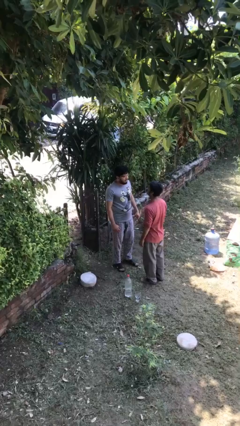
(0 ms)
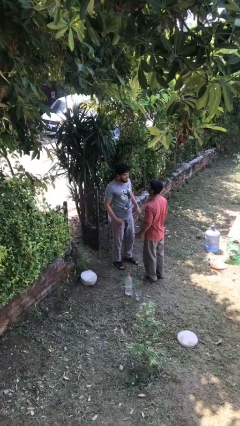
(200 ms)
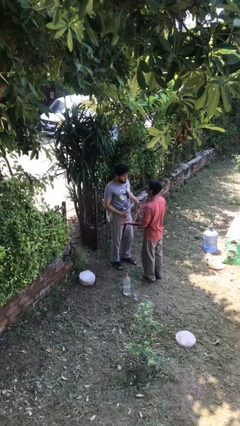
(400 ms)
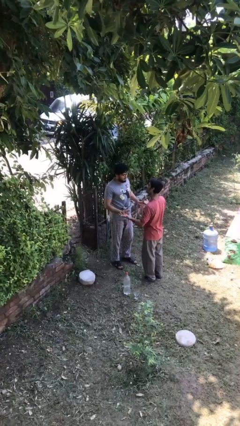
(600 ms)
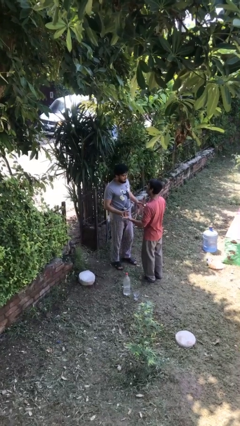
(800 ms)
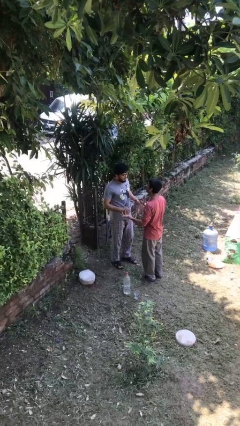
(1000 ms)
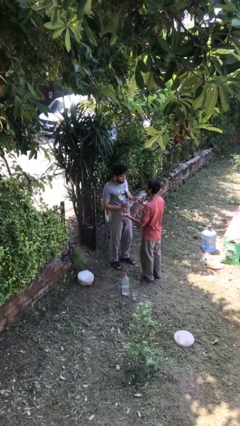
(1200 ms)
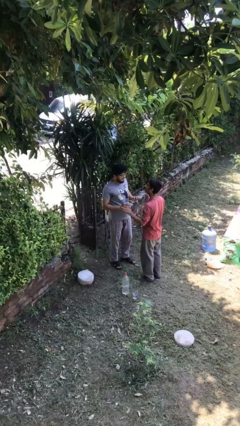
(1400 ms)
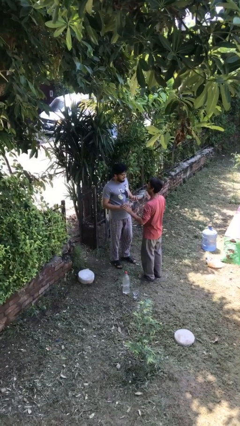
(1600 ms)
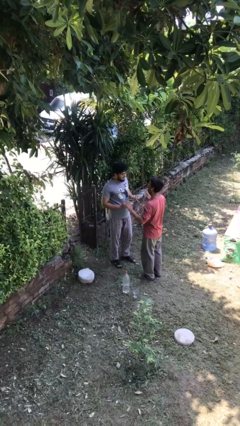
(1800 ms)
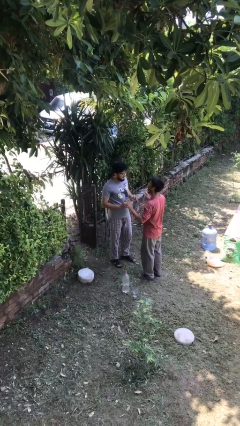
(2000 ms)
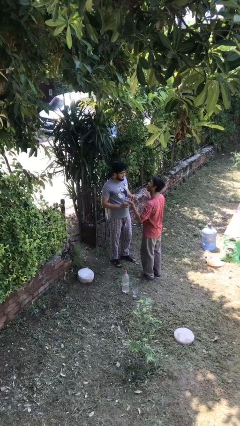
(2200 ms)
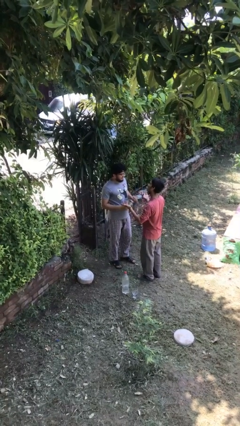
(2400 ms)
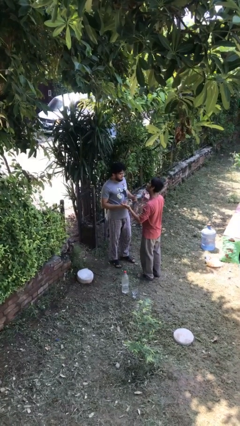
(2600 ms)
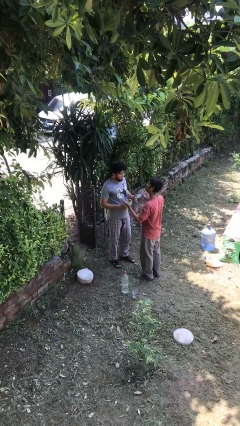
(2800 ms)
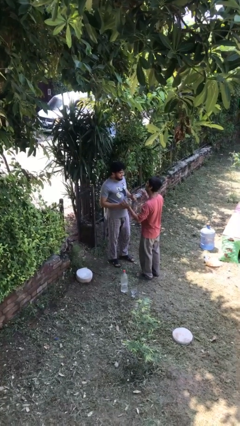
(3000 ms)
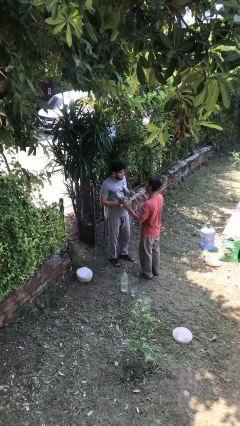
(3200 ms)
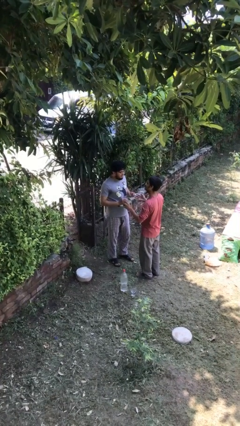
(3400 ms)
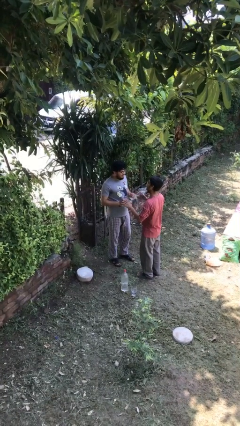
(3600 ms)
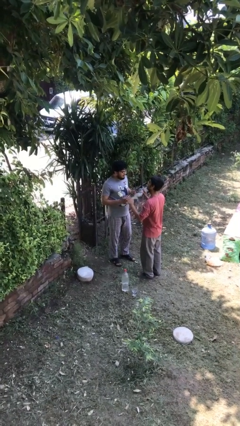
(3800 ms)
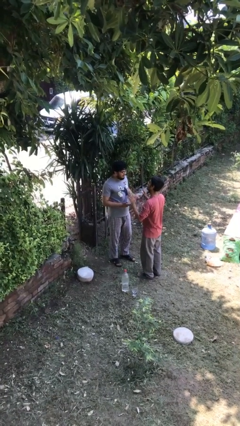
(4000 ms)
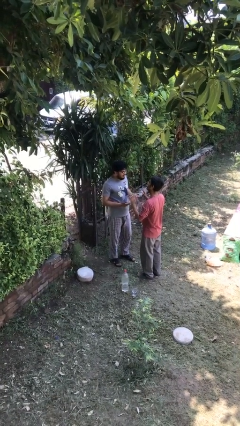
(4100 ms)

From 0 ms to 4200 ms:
person talks to person

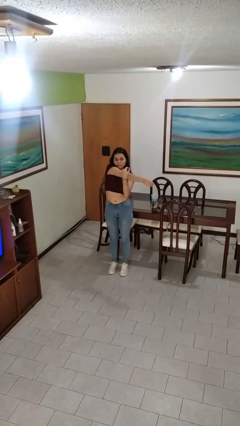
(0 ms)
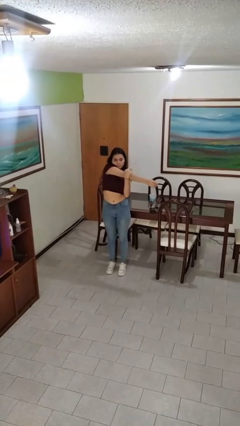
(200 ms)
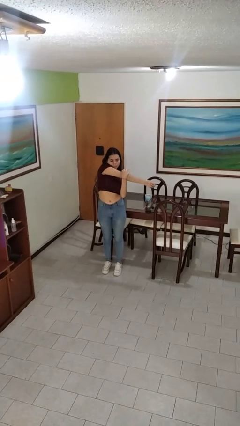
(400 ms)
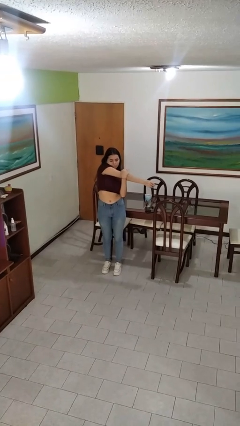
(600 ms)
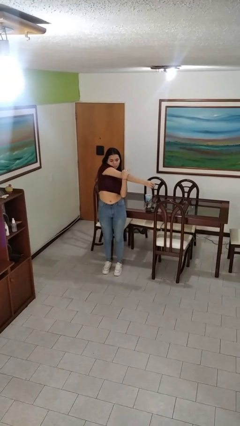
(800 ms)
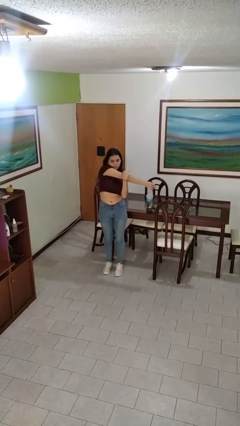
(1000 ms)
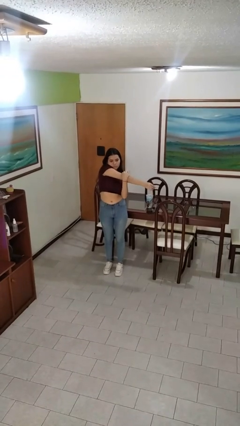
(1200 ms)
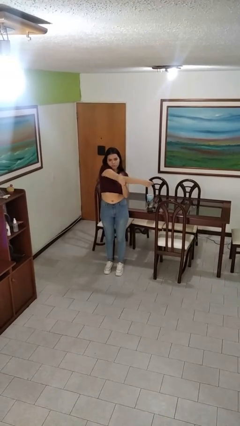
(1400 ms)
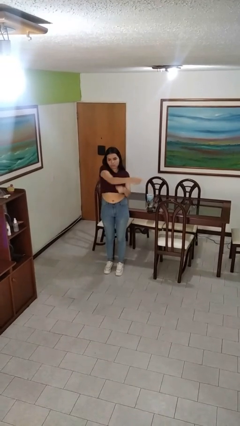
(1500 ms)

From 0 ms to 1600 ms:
person stretches arms to side

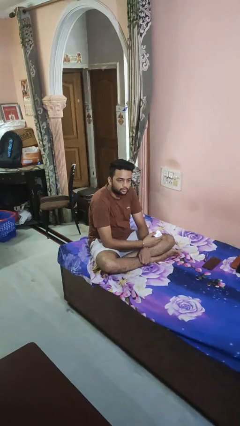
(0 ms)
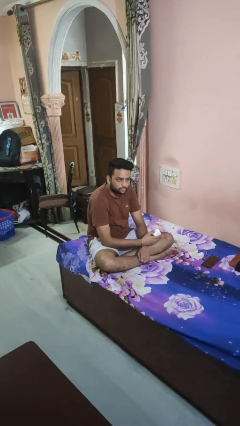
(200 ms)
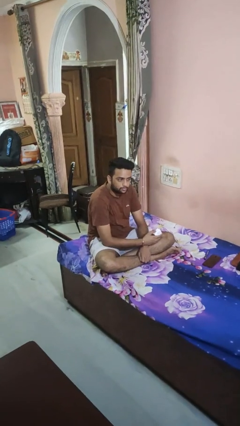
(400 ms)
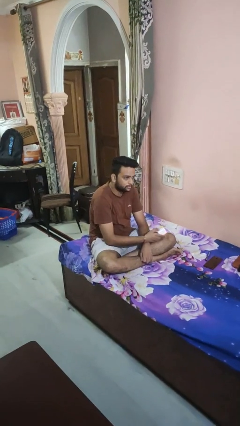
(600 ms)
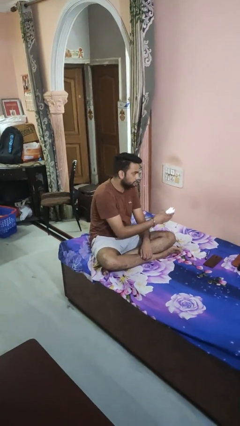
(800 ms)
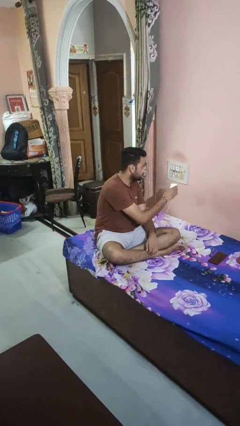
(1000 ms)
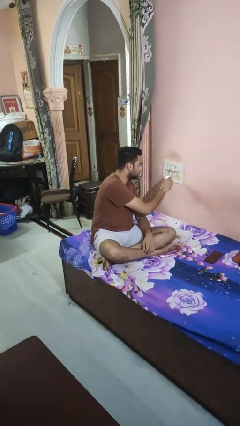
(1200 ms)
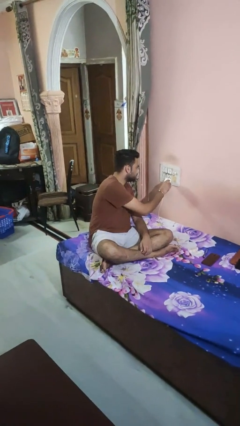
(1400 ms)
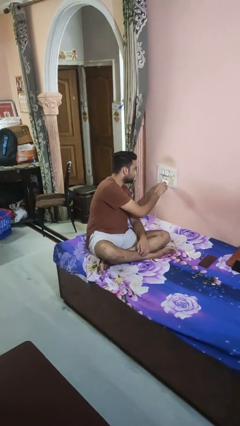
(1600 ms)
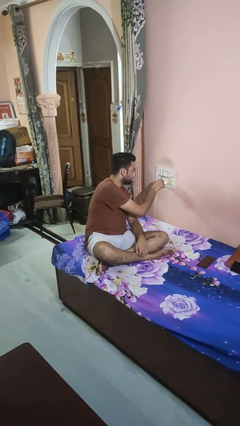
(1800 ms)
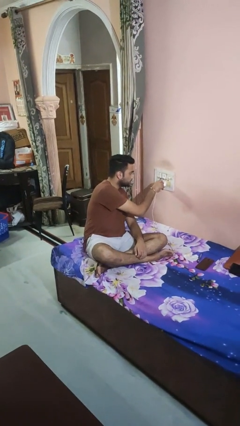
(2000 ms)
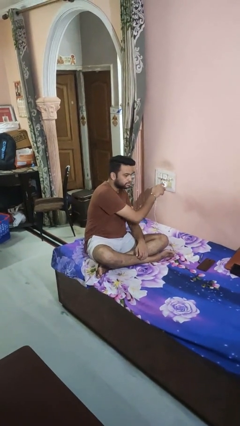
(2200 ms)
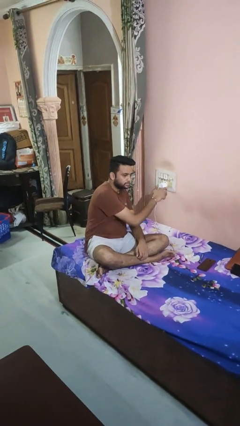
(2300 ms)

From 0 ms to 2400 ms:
person plugs into electrical socket

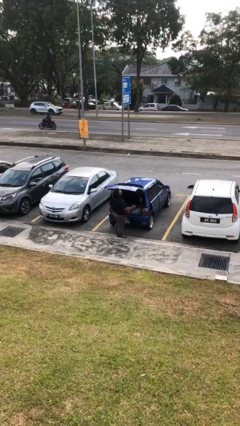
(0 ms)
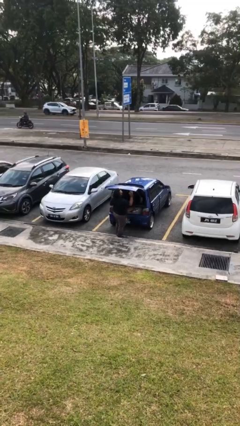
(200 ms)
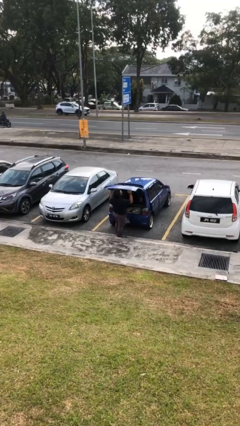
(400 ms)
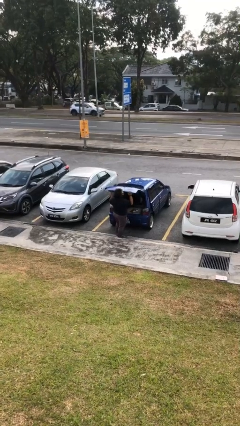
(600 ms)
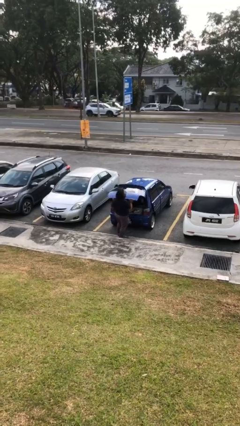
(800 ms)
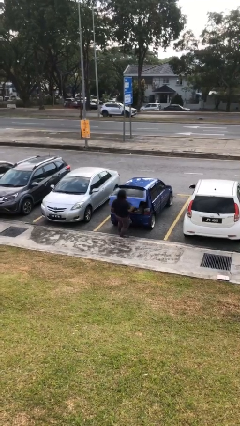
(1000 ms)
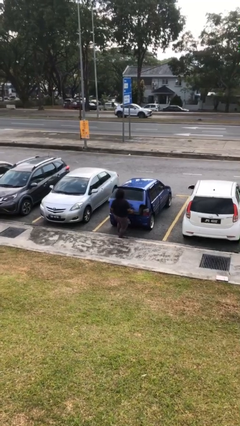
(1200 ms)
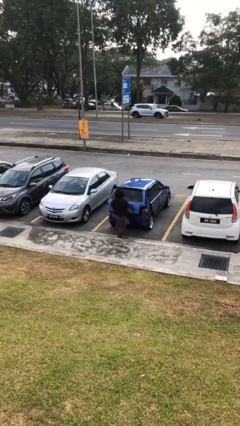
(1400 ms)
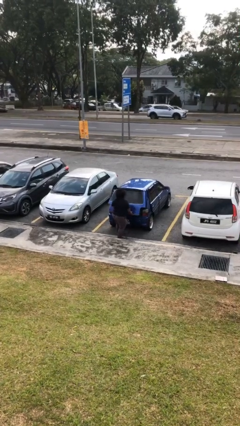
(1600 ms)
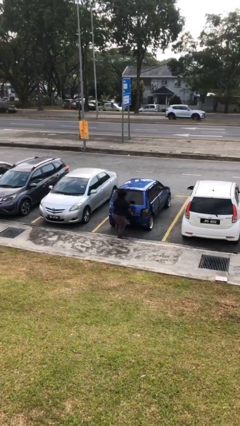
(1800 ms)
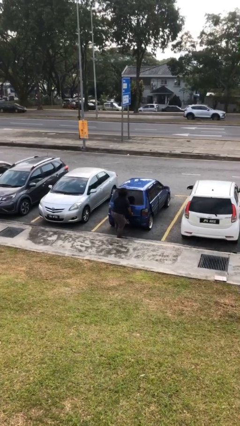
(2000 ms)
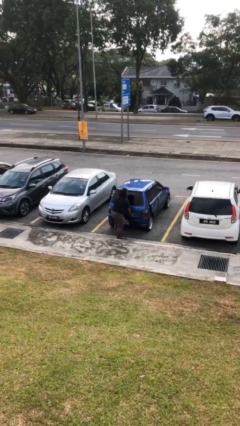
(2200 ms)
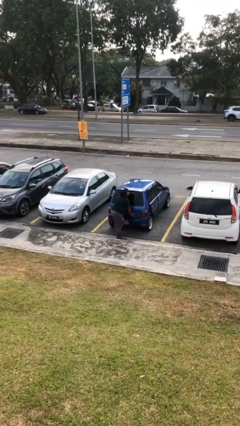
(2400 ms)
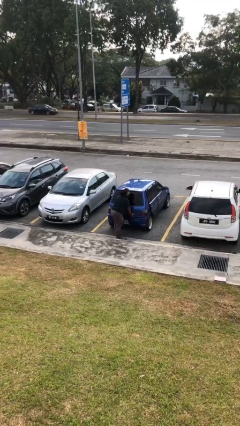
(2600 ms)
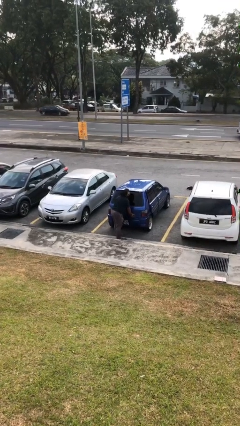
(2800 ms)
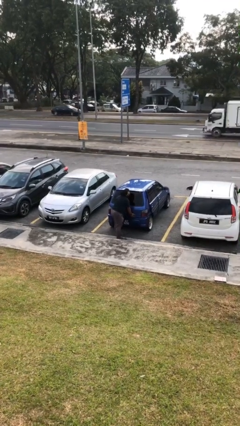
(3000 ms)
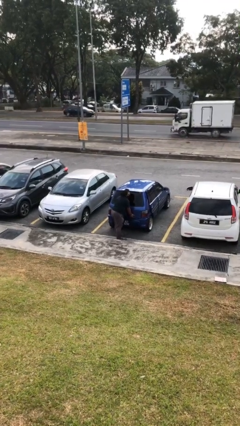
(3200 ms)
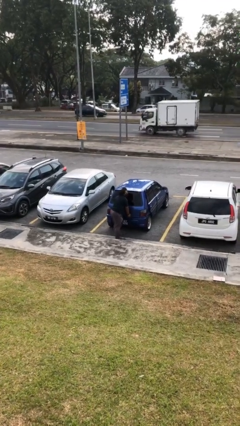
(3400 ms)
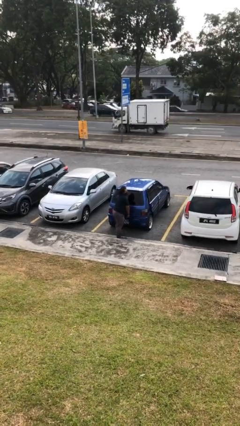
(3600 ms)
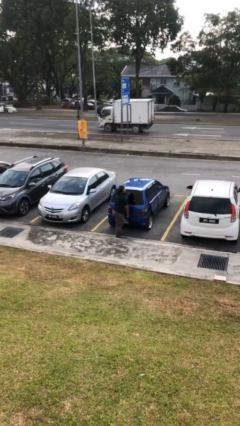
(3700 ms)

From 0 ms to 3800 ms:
person closes car trunk

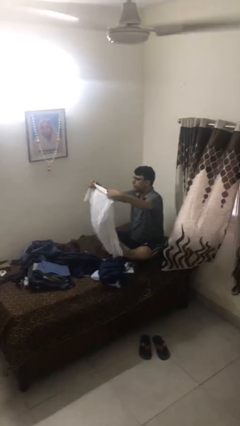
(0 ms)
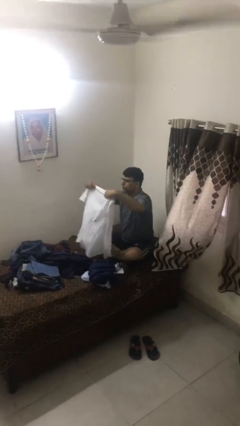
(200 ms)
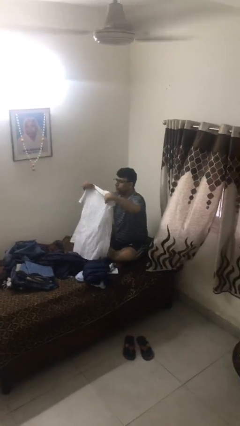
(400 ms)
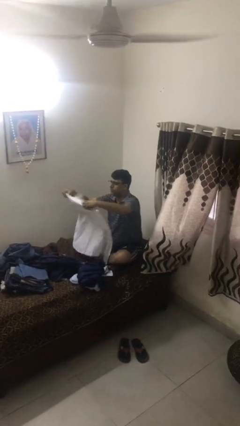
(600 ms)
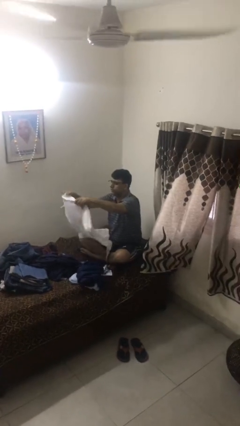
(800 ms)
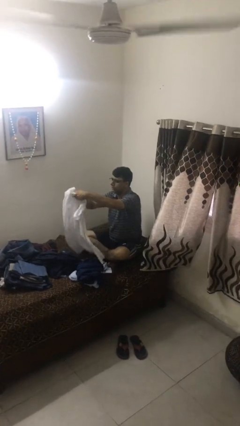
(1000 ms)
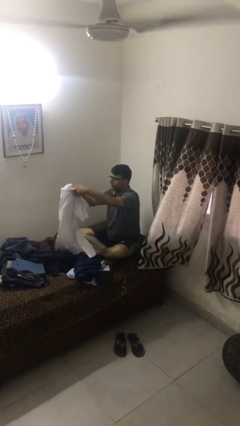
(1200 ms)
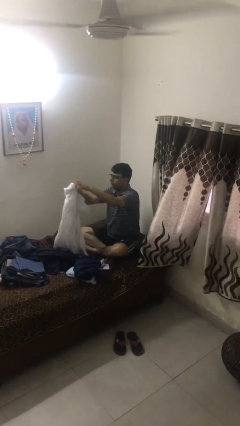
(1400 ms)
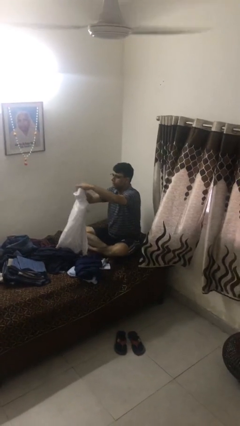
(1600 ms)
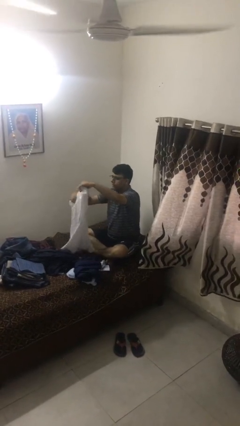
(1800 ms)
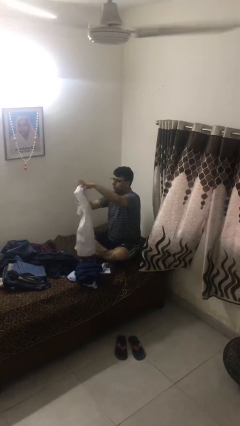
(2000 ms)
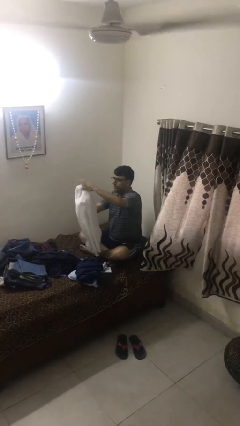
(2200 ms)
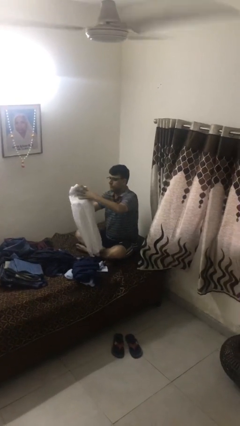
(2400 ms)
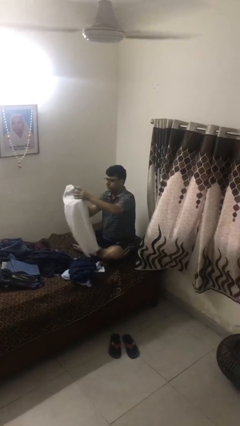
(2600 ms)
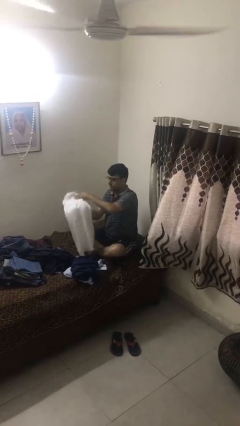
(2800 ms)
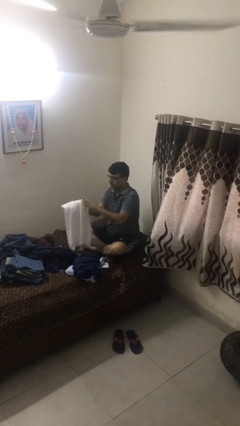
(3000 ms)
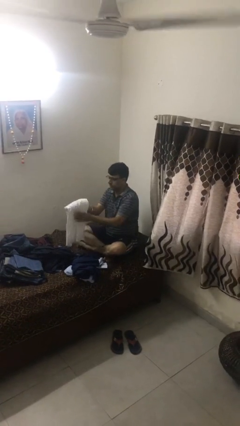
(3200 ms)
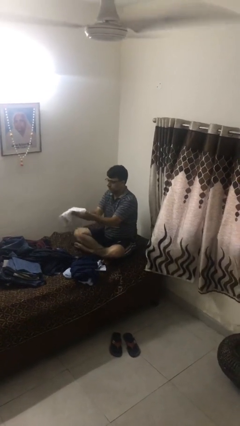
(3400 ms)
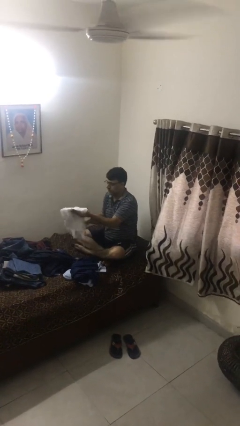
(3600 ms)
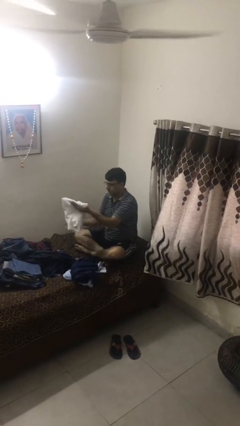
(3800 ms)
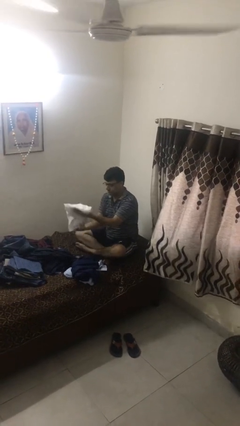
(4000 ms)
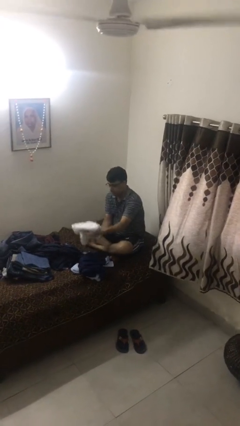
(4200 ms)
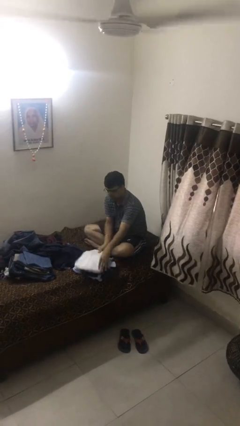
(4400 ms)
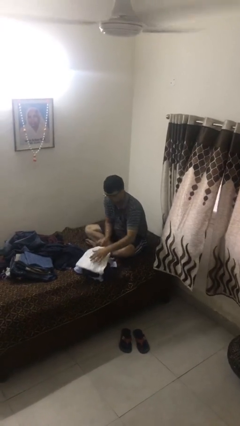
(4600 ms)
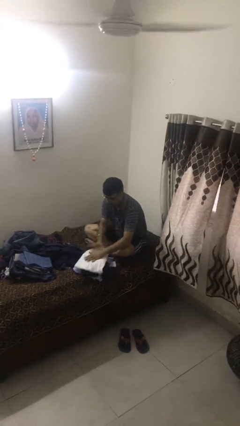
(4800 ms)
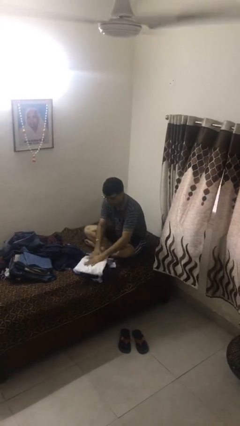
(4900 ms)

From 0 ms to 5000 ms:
person folds shirt

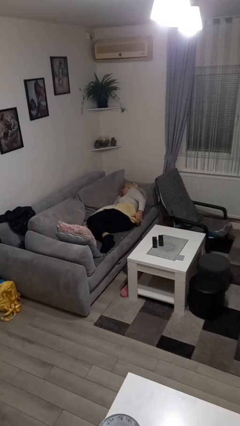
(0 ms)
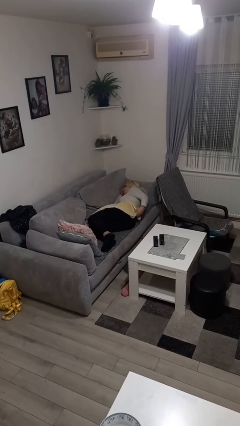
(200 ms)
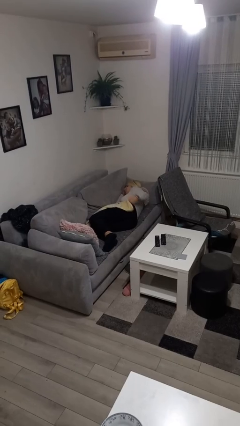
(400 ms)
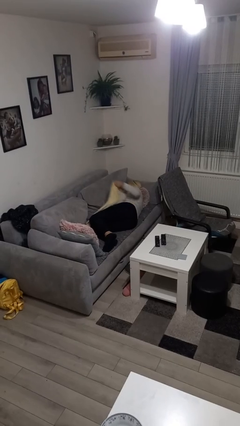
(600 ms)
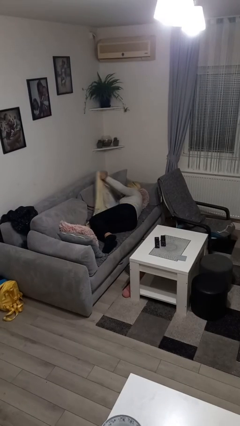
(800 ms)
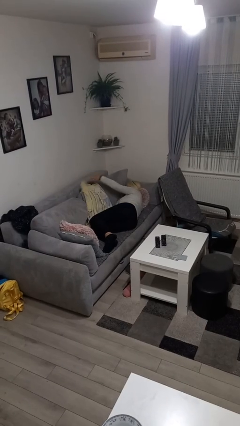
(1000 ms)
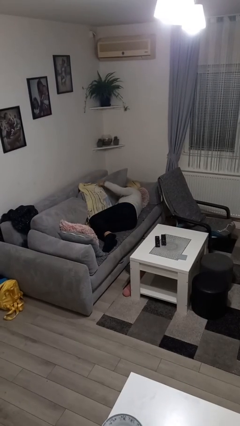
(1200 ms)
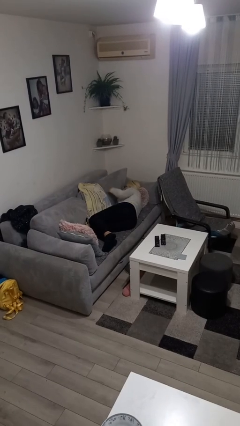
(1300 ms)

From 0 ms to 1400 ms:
person uncovers with blanket
